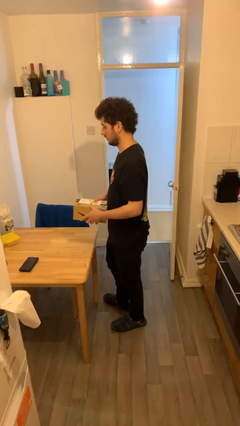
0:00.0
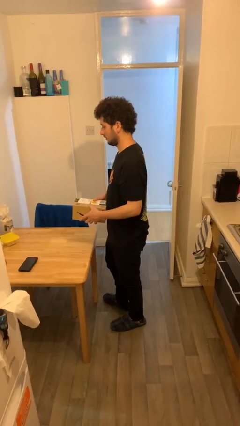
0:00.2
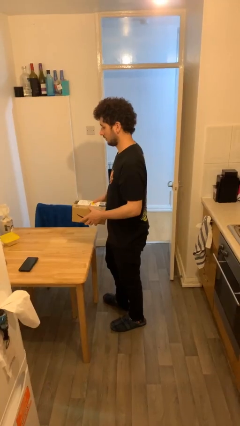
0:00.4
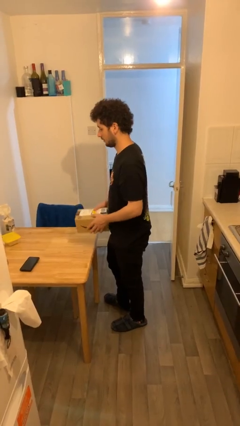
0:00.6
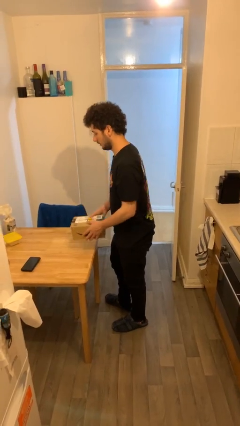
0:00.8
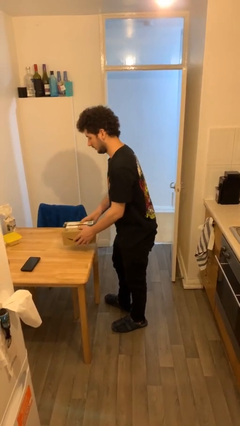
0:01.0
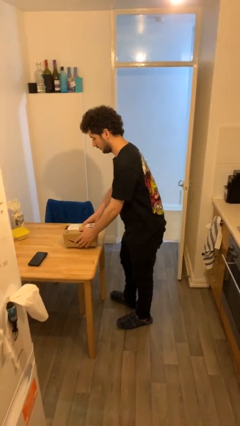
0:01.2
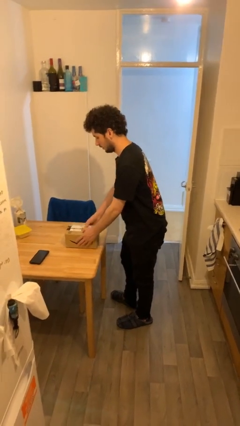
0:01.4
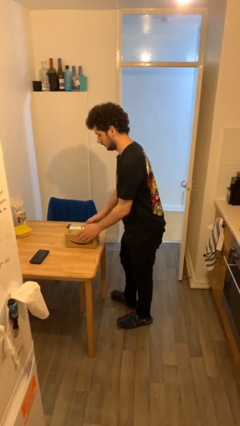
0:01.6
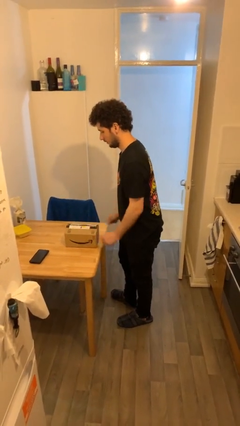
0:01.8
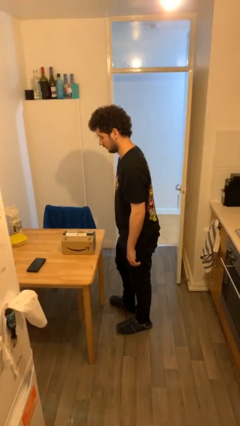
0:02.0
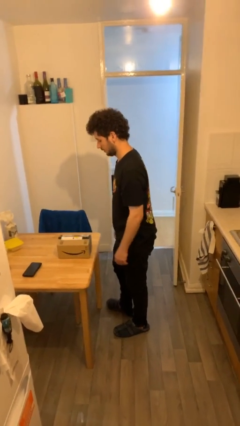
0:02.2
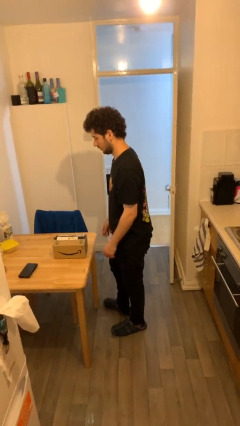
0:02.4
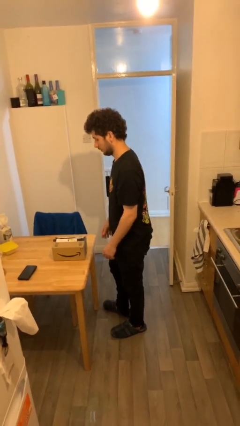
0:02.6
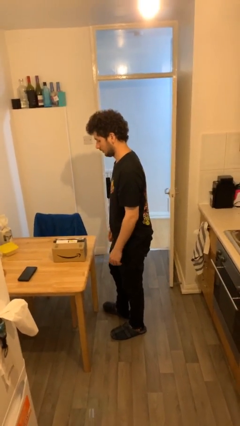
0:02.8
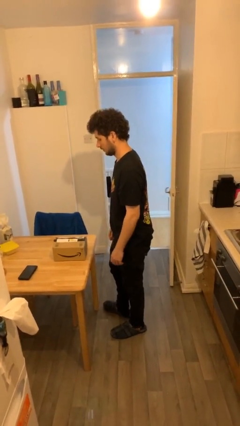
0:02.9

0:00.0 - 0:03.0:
person puts down object on table

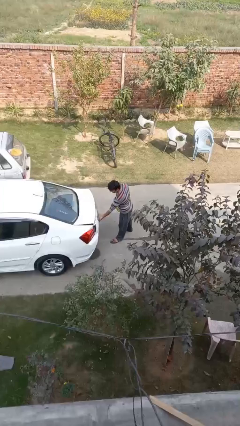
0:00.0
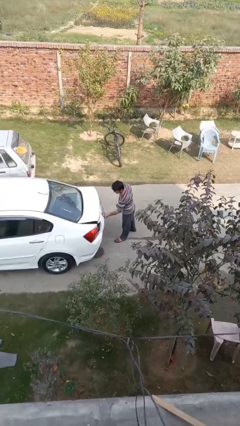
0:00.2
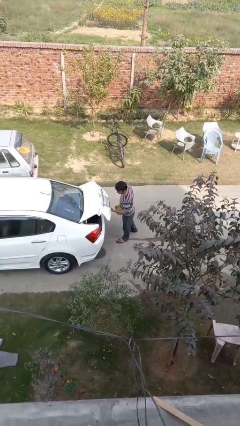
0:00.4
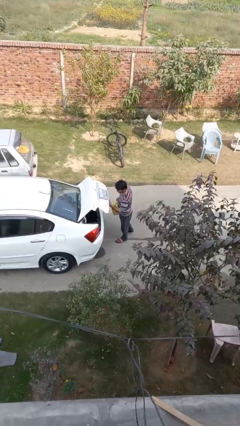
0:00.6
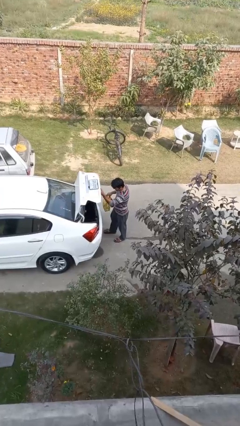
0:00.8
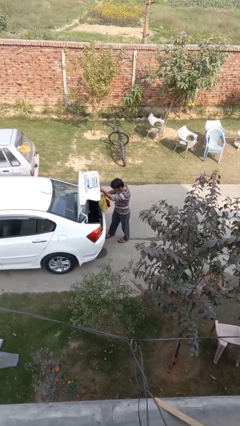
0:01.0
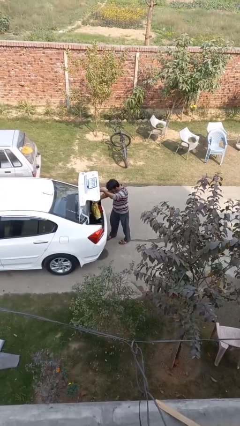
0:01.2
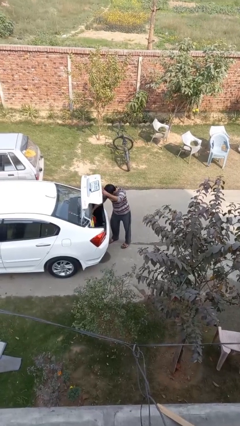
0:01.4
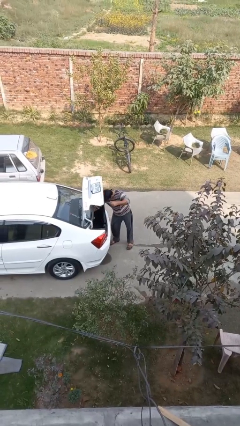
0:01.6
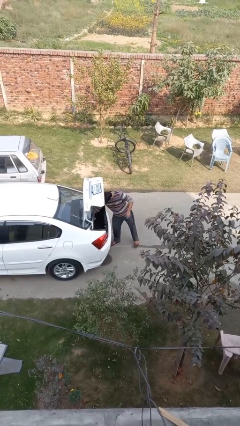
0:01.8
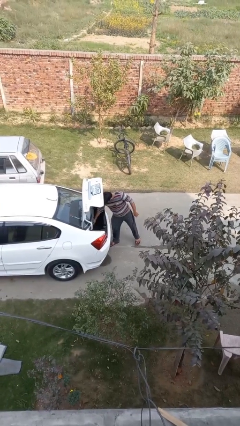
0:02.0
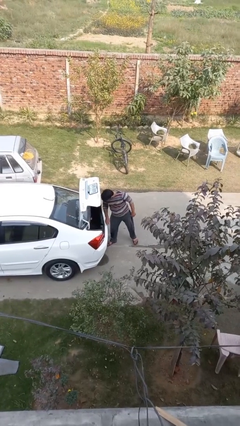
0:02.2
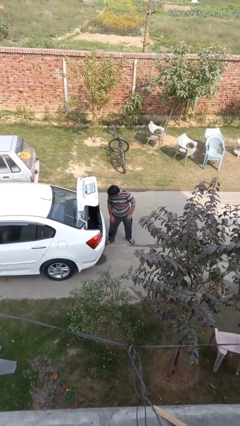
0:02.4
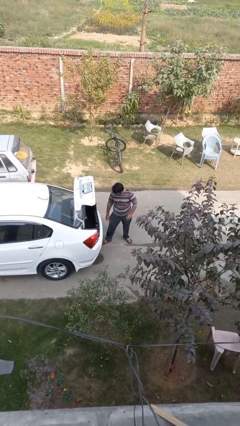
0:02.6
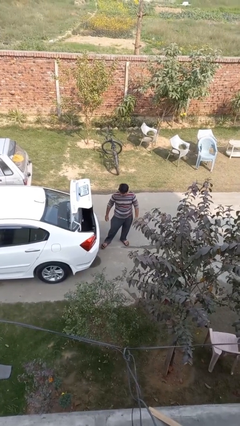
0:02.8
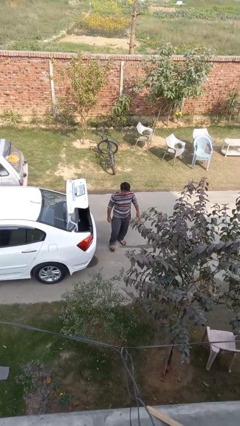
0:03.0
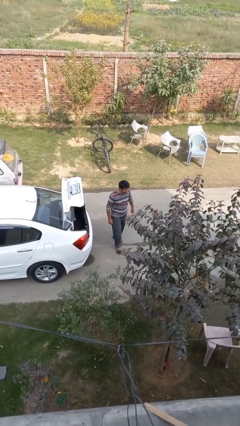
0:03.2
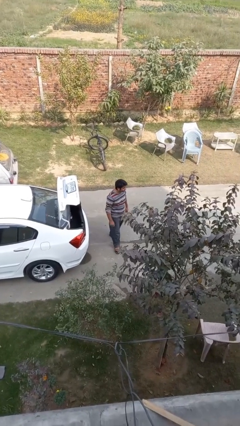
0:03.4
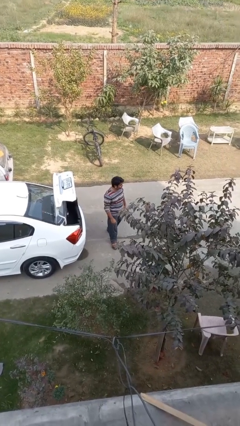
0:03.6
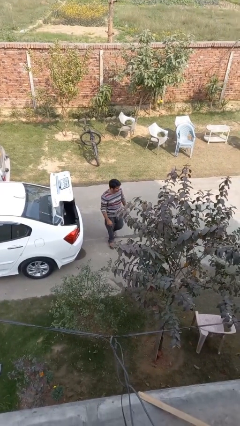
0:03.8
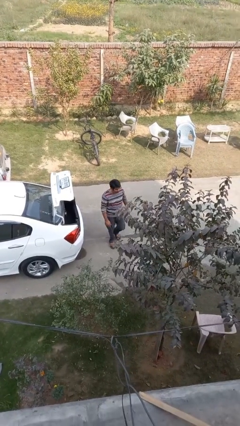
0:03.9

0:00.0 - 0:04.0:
person loads car

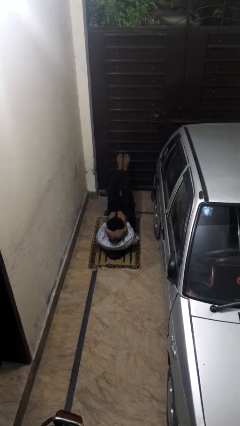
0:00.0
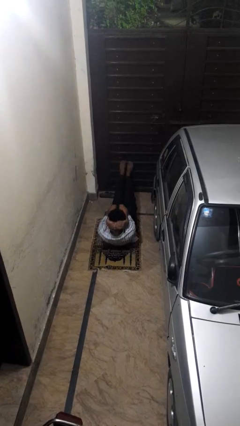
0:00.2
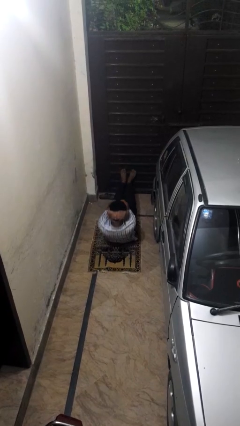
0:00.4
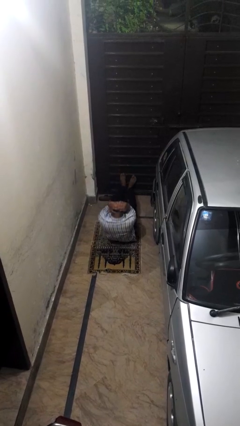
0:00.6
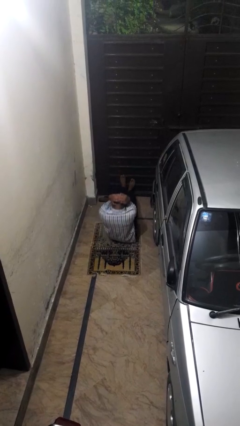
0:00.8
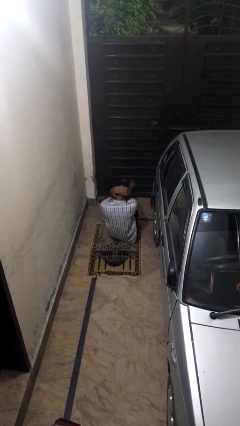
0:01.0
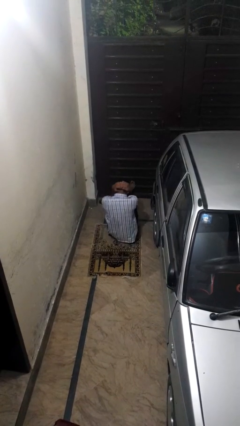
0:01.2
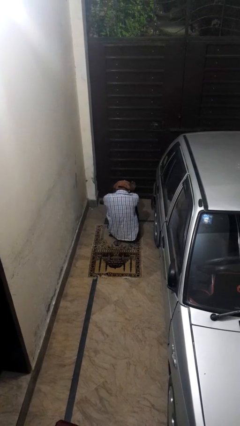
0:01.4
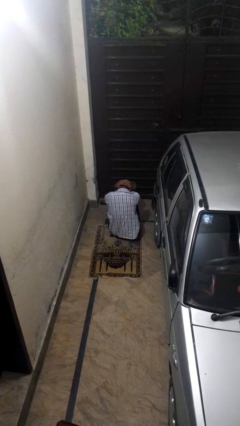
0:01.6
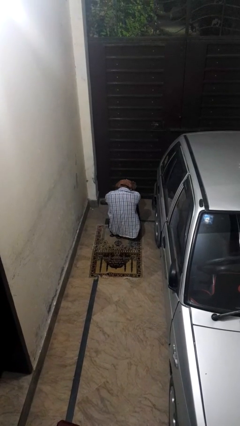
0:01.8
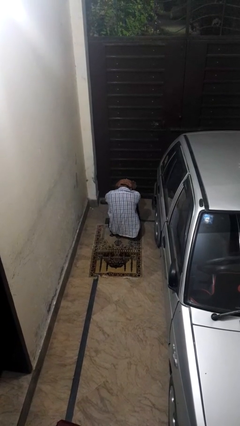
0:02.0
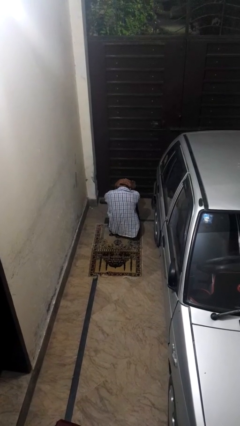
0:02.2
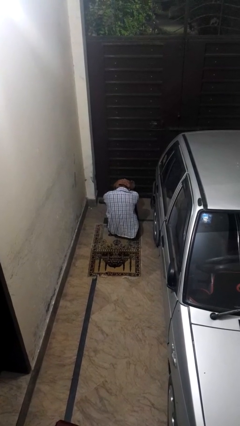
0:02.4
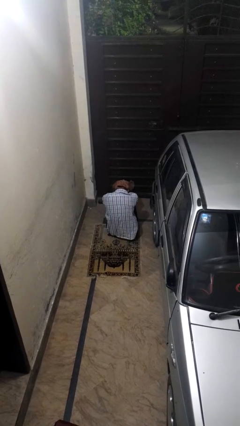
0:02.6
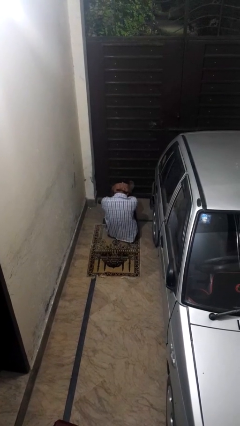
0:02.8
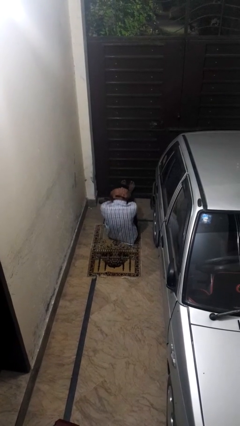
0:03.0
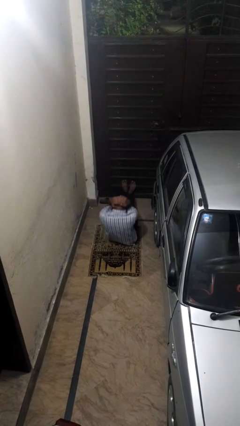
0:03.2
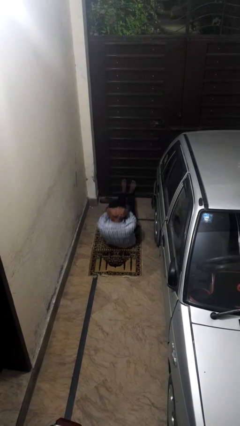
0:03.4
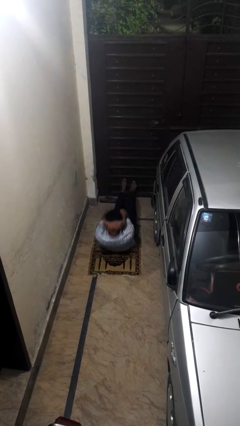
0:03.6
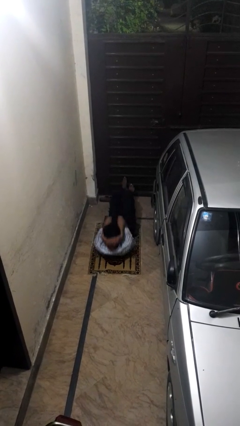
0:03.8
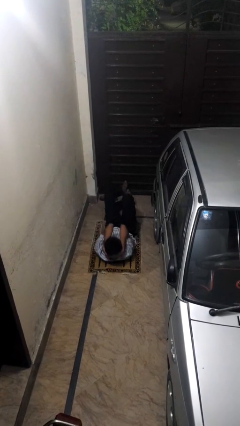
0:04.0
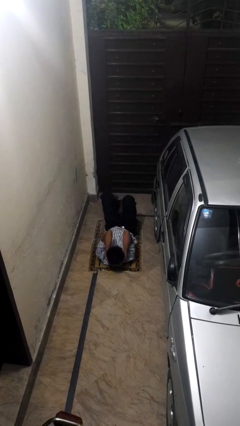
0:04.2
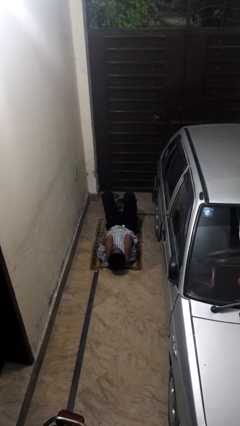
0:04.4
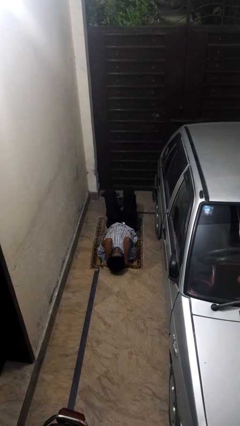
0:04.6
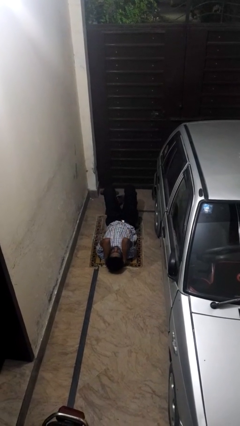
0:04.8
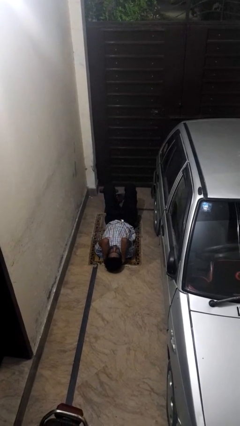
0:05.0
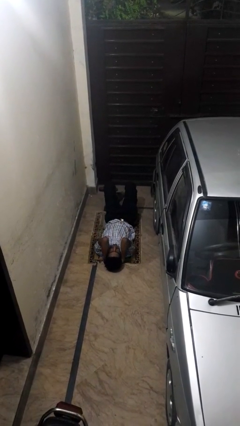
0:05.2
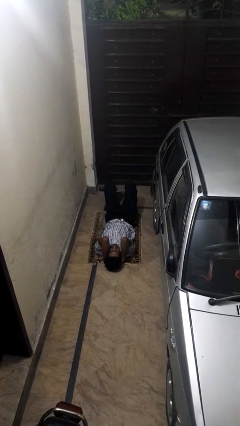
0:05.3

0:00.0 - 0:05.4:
person exercises with situp

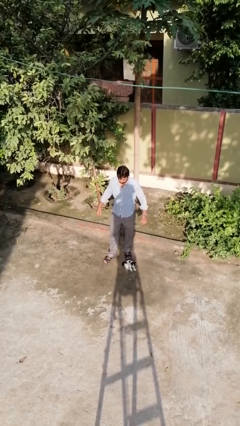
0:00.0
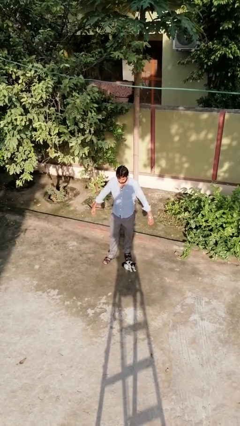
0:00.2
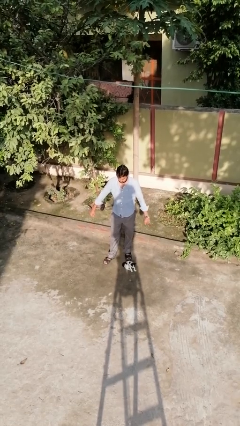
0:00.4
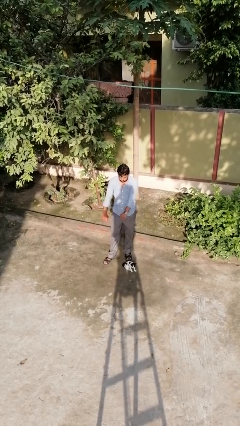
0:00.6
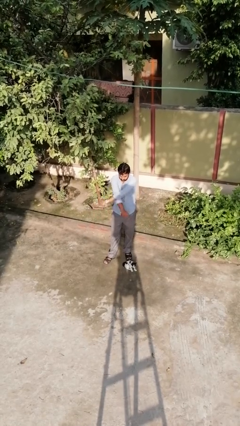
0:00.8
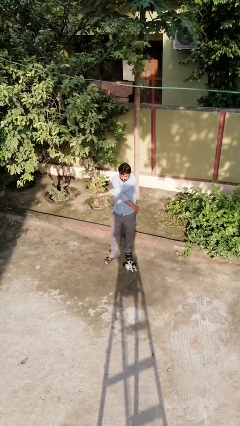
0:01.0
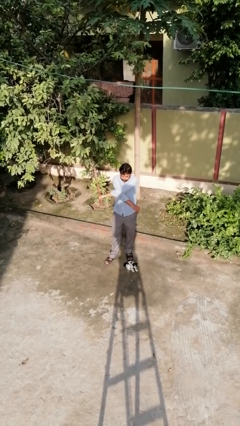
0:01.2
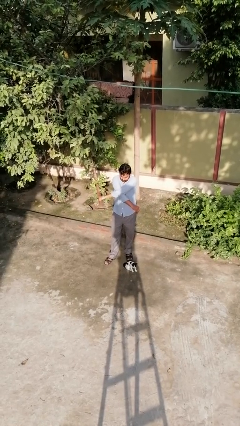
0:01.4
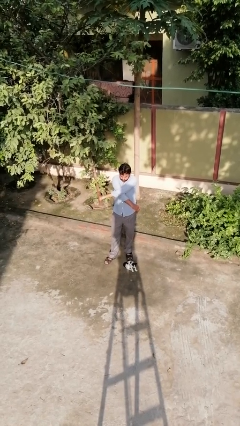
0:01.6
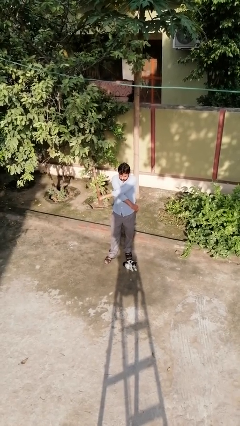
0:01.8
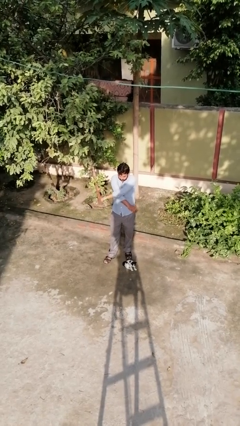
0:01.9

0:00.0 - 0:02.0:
person crosses arms

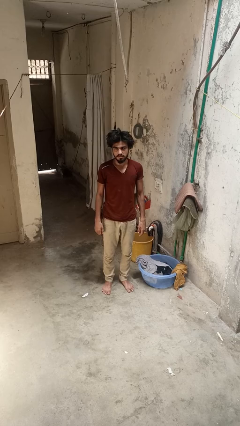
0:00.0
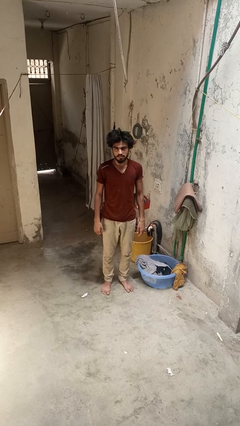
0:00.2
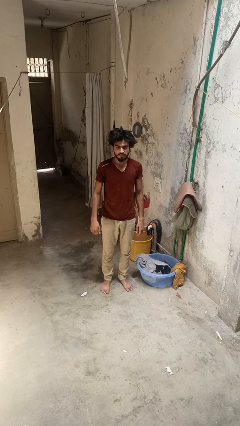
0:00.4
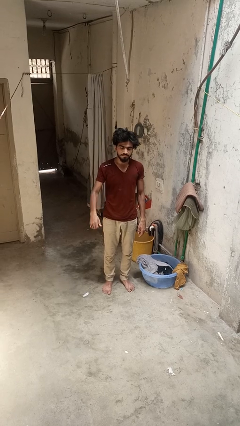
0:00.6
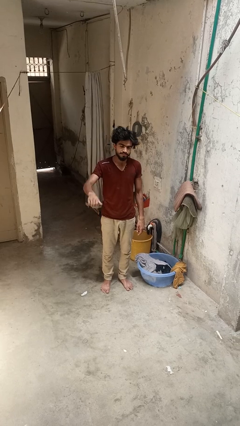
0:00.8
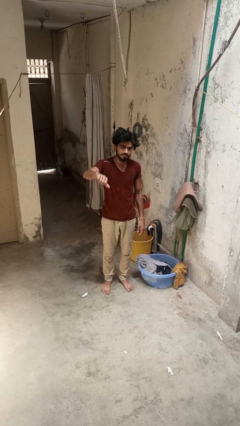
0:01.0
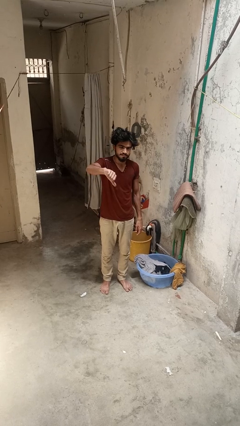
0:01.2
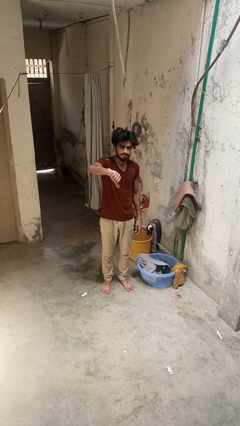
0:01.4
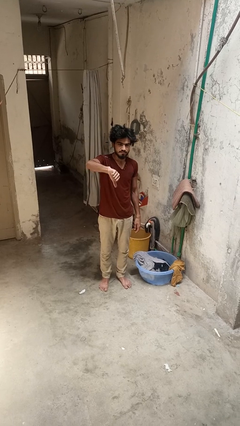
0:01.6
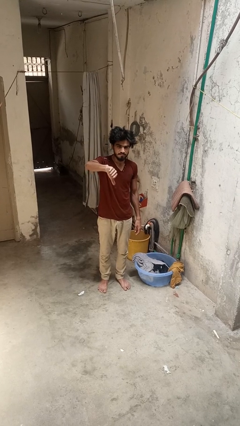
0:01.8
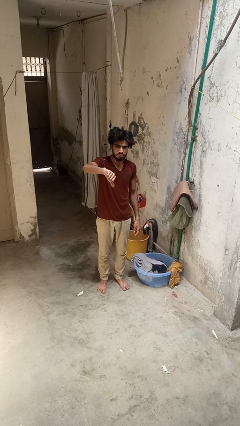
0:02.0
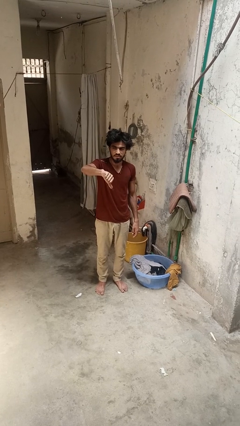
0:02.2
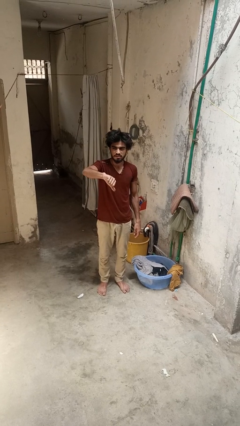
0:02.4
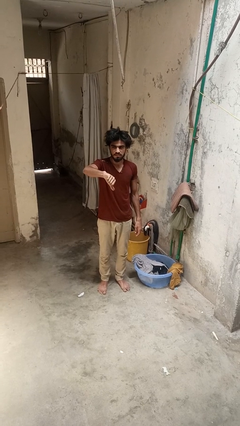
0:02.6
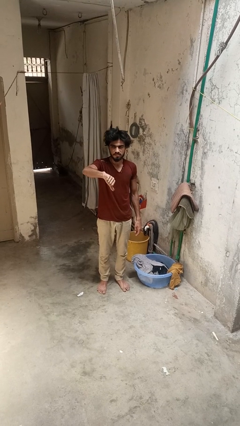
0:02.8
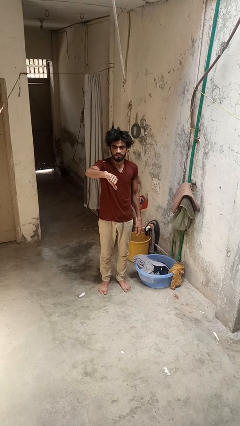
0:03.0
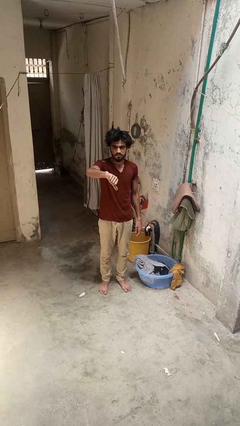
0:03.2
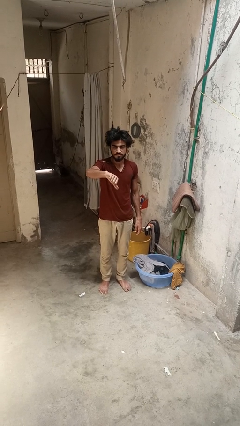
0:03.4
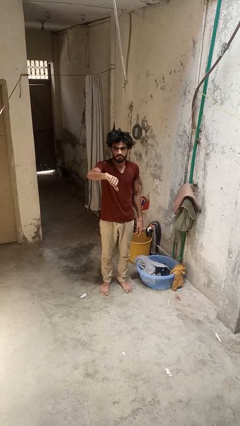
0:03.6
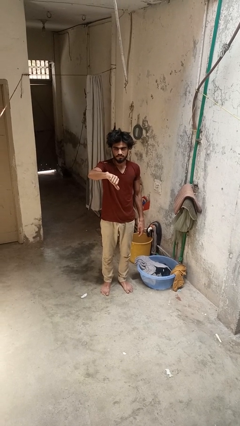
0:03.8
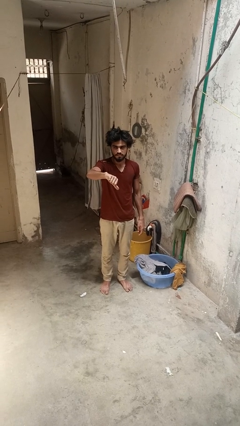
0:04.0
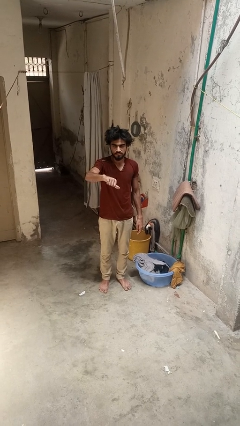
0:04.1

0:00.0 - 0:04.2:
person gestures thumbs down
